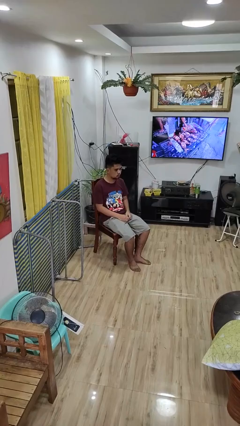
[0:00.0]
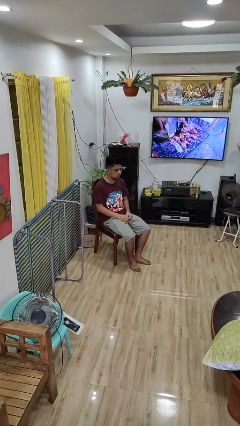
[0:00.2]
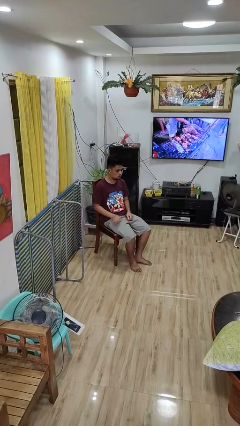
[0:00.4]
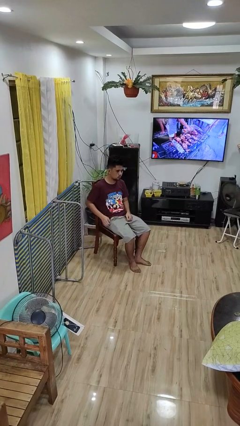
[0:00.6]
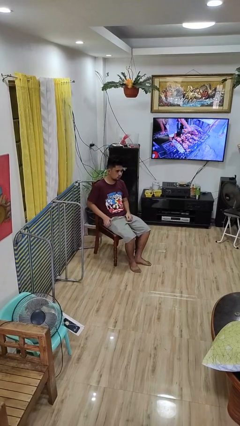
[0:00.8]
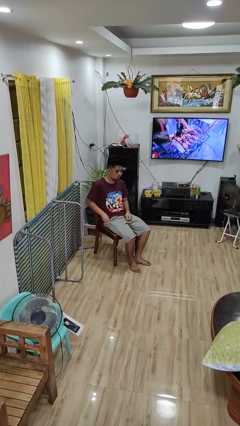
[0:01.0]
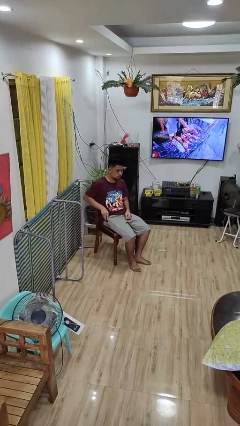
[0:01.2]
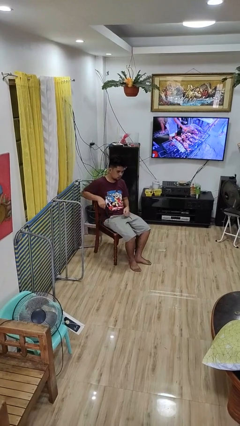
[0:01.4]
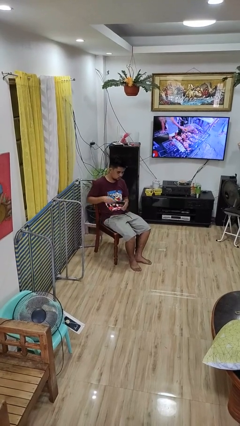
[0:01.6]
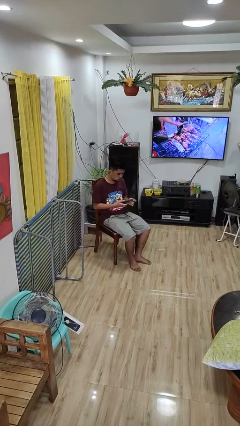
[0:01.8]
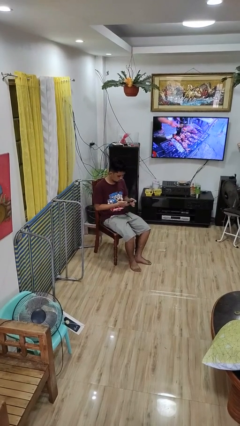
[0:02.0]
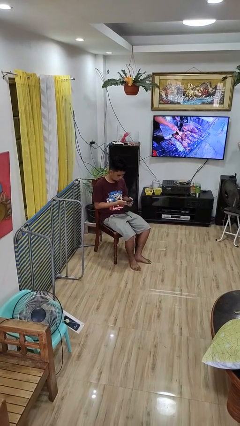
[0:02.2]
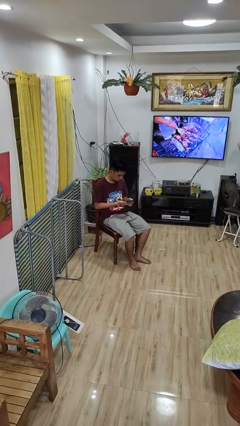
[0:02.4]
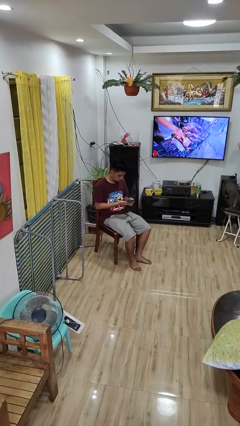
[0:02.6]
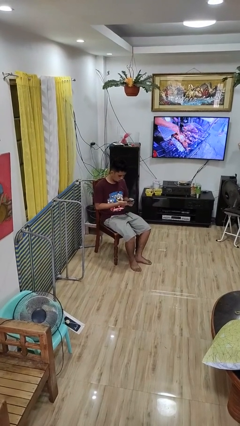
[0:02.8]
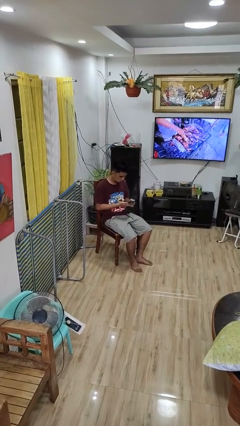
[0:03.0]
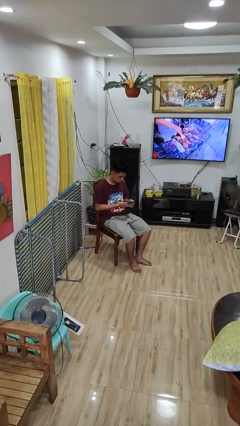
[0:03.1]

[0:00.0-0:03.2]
person takes phone from pocket

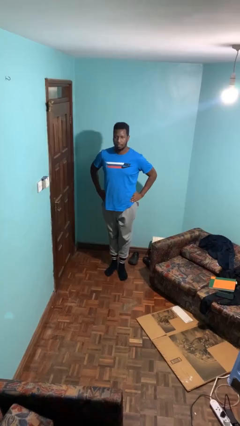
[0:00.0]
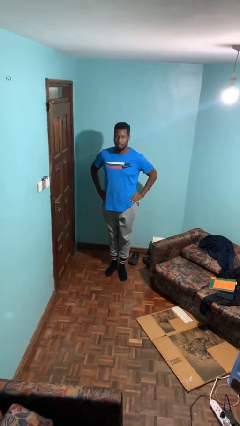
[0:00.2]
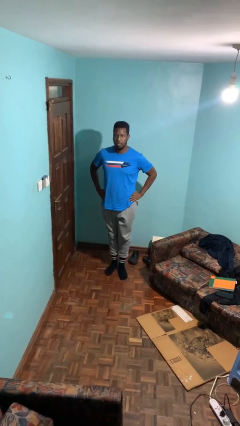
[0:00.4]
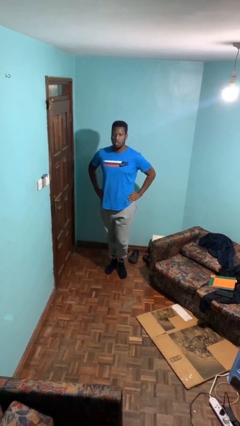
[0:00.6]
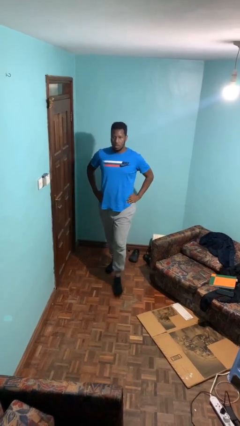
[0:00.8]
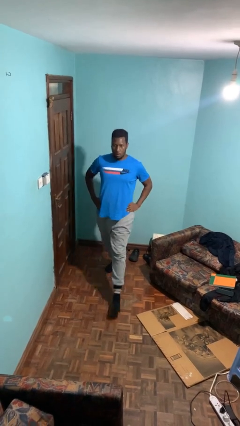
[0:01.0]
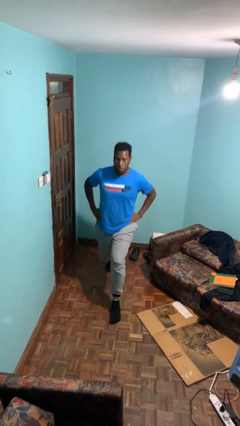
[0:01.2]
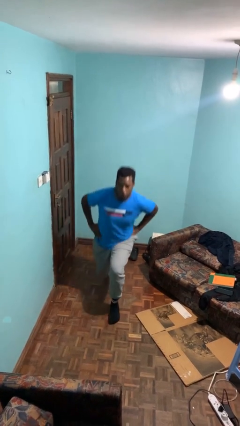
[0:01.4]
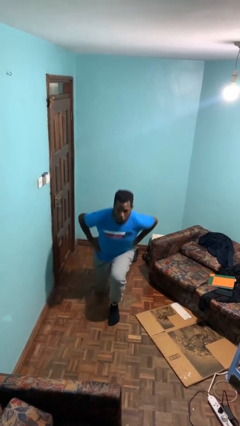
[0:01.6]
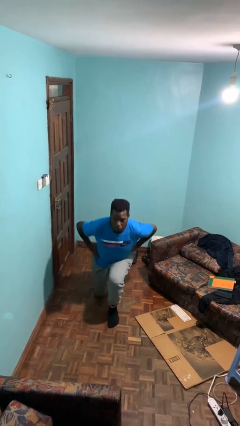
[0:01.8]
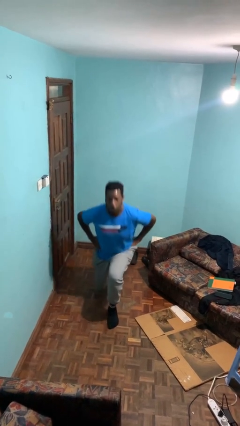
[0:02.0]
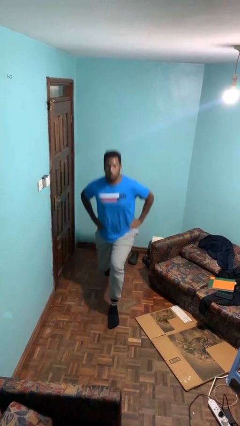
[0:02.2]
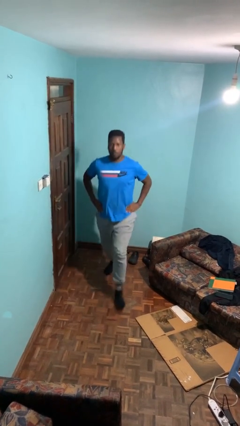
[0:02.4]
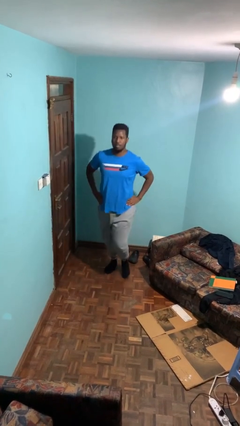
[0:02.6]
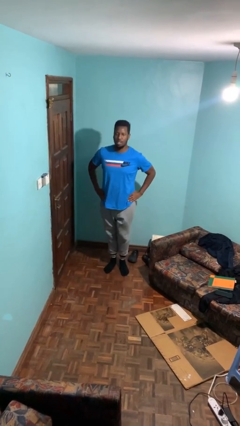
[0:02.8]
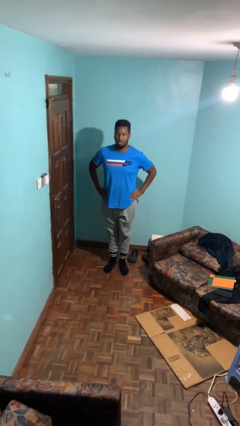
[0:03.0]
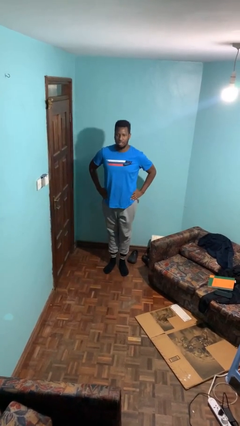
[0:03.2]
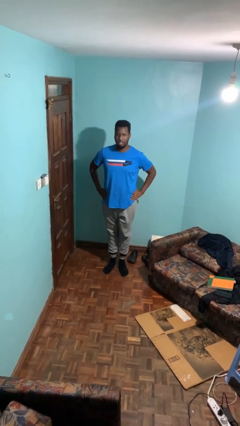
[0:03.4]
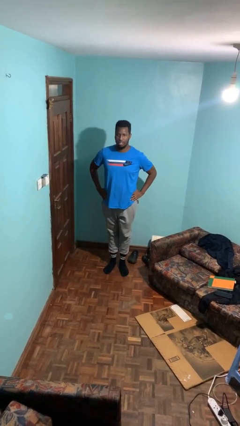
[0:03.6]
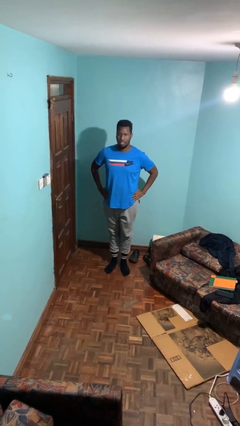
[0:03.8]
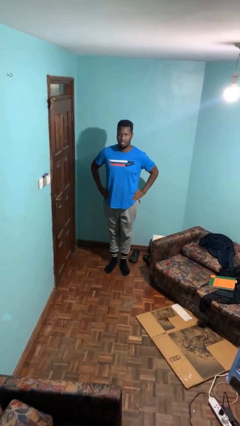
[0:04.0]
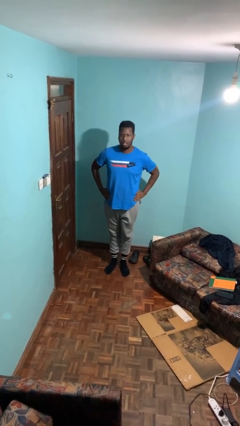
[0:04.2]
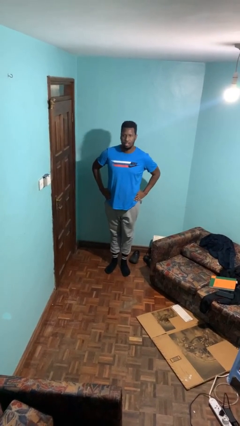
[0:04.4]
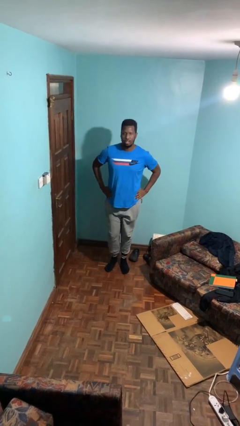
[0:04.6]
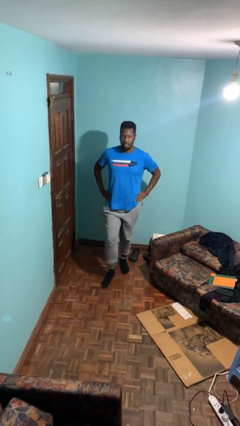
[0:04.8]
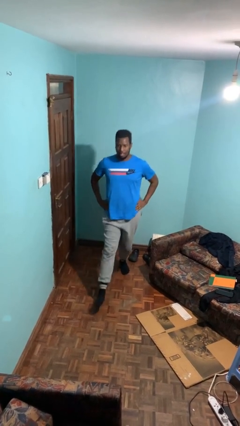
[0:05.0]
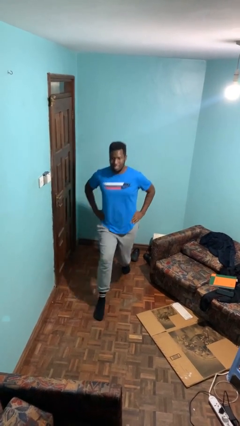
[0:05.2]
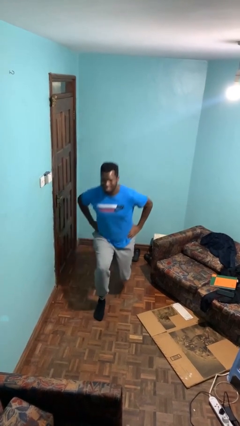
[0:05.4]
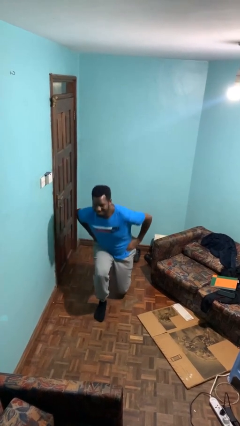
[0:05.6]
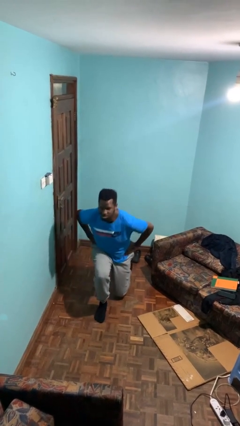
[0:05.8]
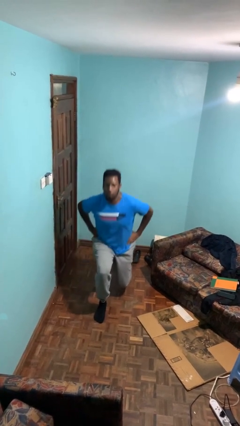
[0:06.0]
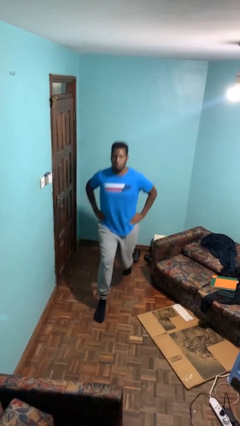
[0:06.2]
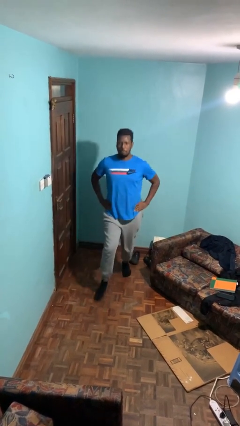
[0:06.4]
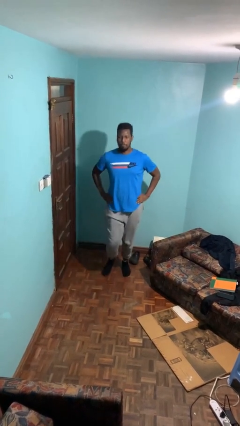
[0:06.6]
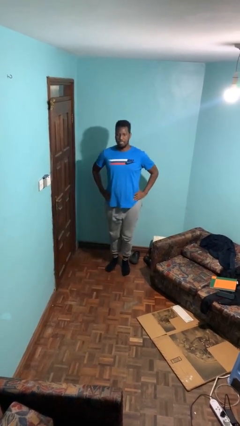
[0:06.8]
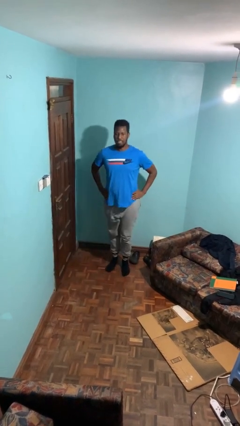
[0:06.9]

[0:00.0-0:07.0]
person exercises with lunges

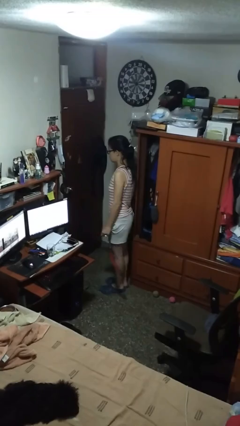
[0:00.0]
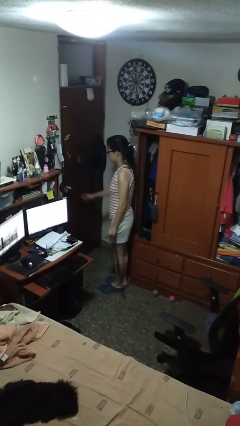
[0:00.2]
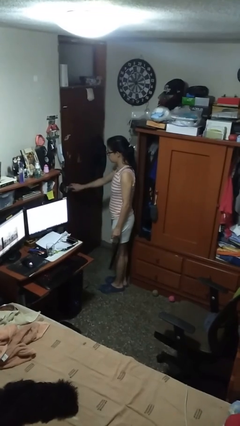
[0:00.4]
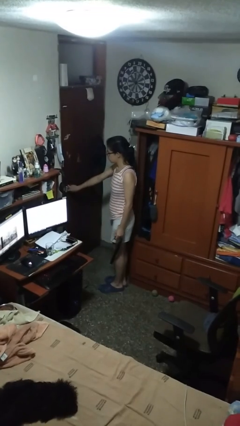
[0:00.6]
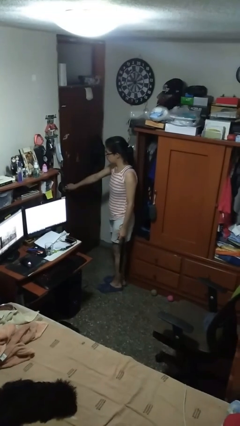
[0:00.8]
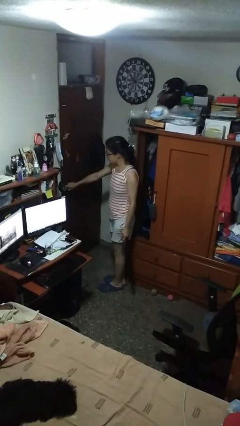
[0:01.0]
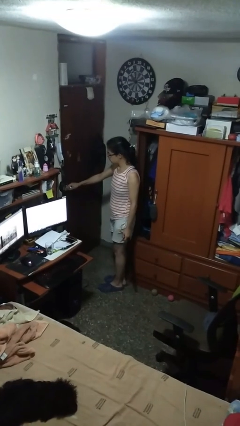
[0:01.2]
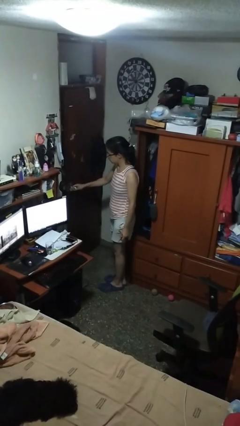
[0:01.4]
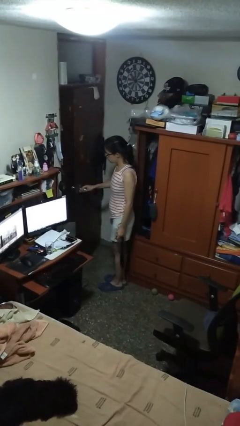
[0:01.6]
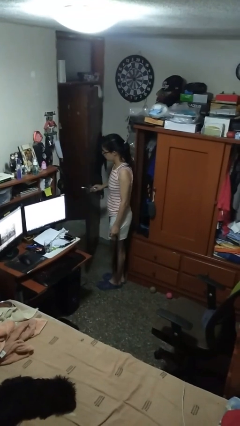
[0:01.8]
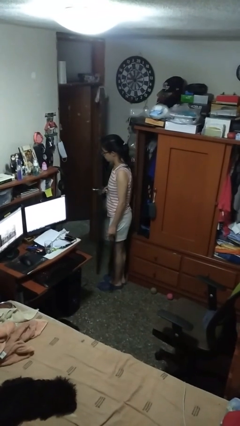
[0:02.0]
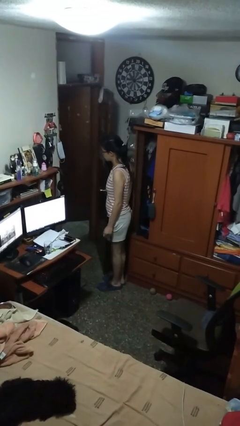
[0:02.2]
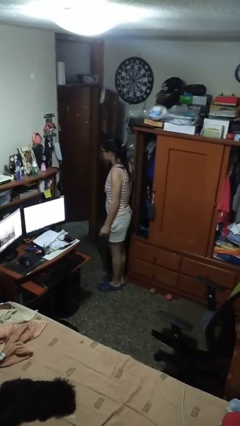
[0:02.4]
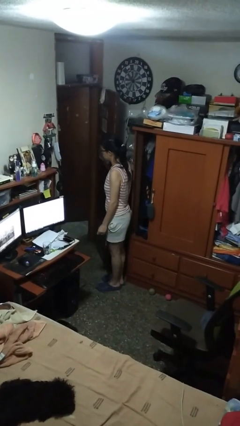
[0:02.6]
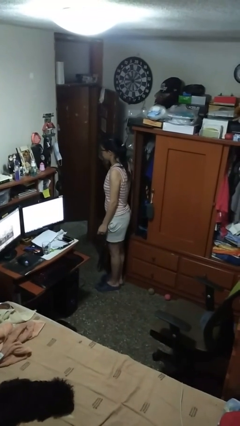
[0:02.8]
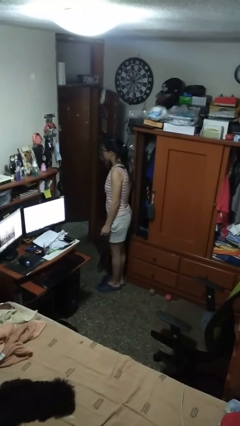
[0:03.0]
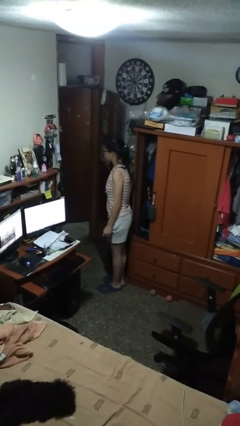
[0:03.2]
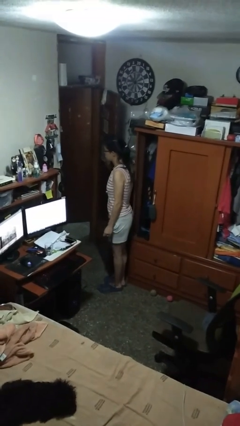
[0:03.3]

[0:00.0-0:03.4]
person opens facility door

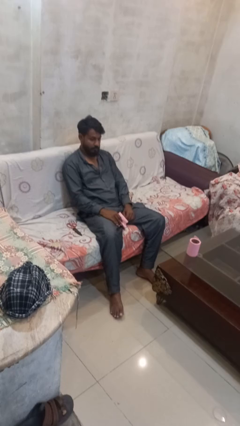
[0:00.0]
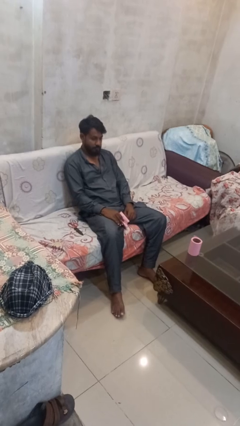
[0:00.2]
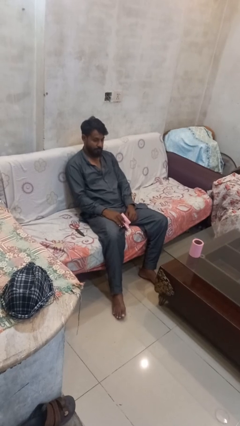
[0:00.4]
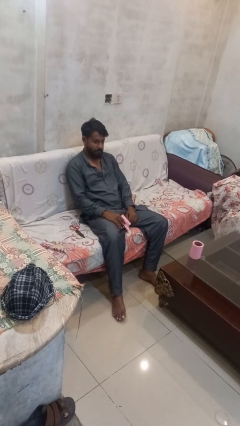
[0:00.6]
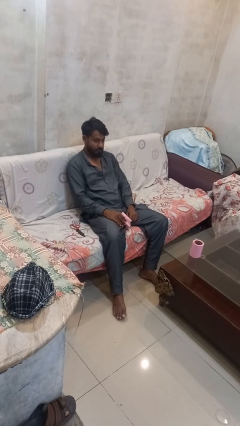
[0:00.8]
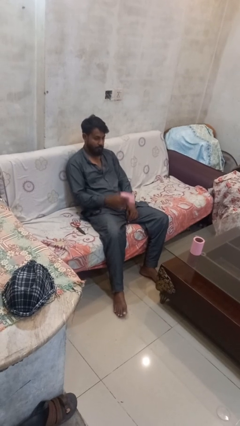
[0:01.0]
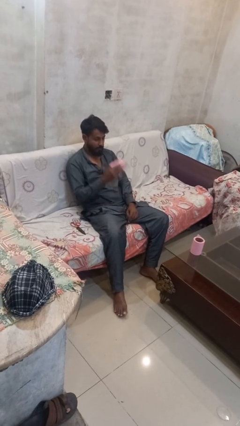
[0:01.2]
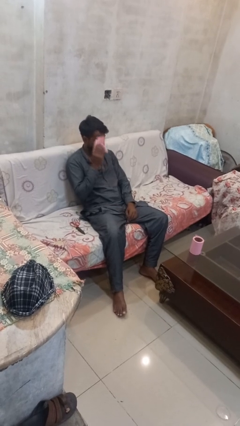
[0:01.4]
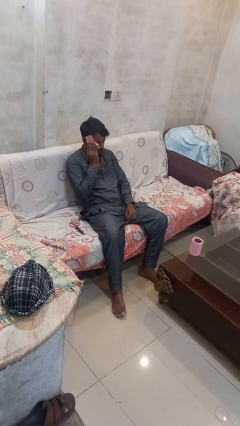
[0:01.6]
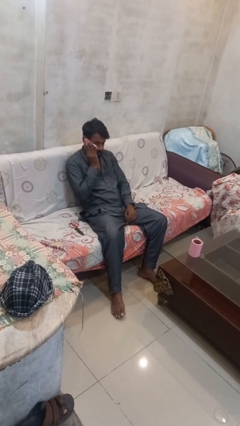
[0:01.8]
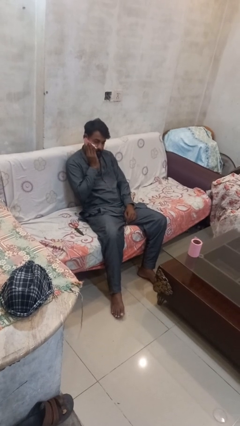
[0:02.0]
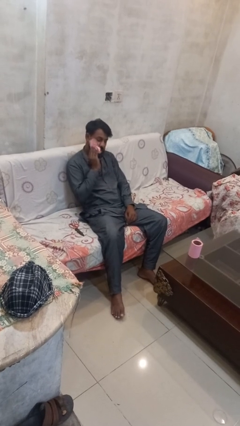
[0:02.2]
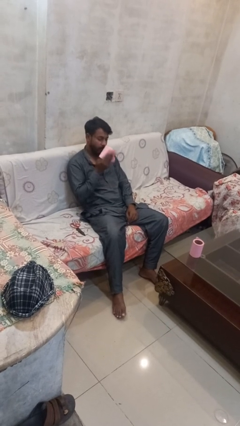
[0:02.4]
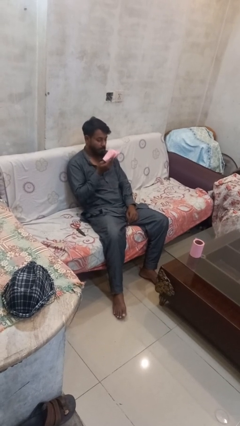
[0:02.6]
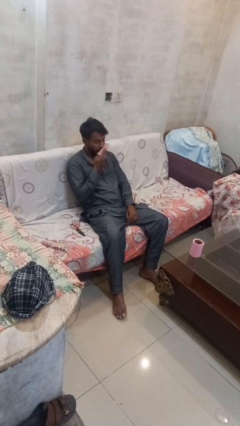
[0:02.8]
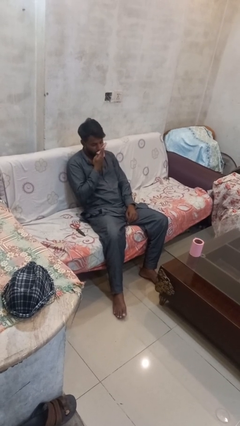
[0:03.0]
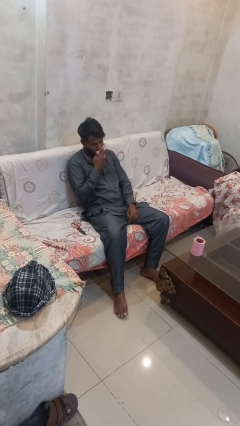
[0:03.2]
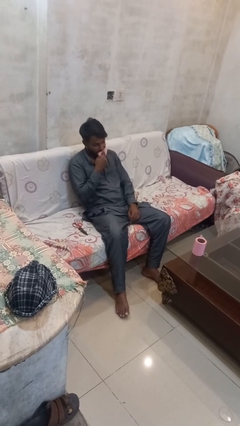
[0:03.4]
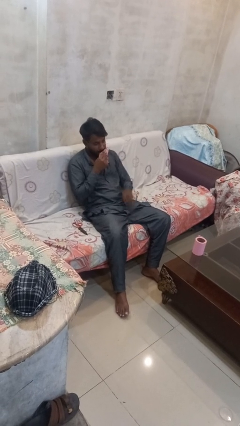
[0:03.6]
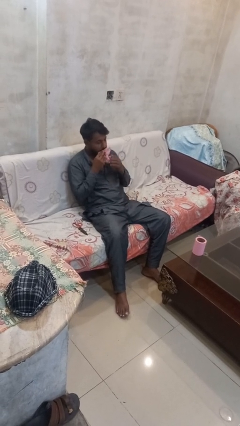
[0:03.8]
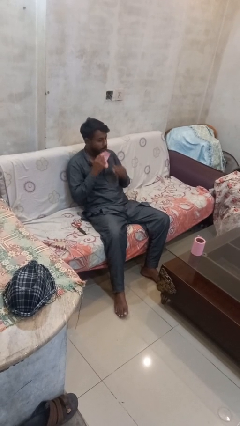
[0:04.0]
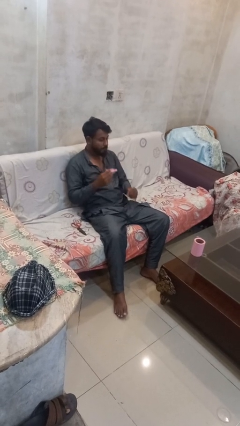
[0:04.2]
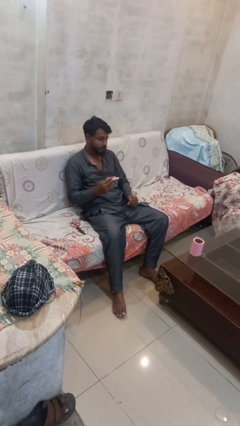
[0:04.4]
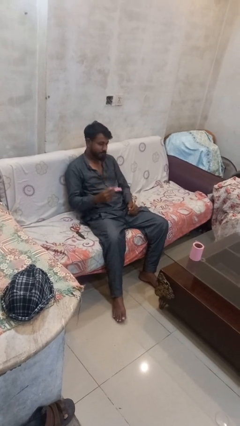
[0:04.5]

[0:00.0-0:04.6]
person wipes mouth with napkin
